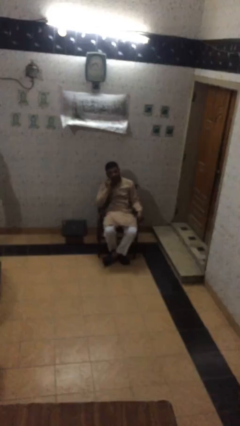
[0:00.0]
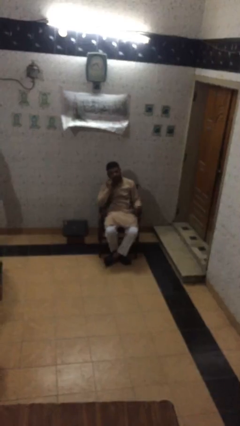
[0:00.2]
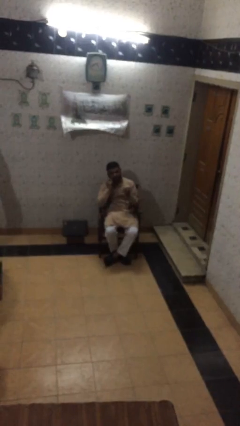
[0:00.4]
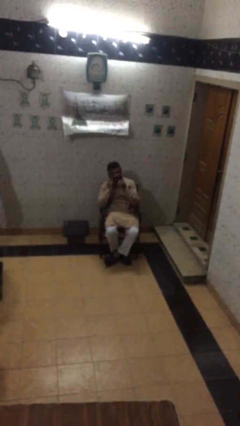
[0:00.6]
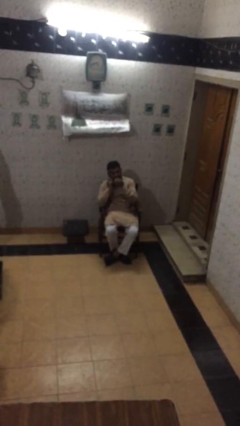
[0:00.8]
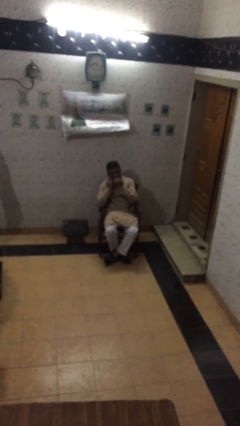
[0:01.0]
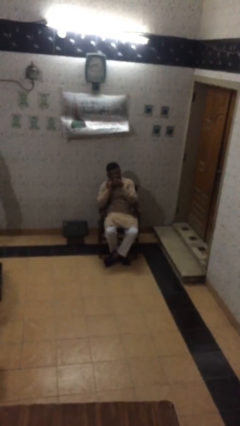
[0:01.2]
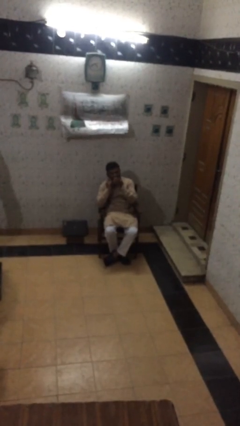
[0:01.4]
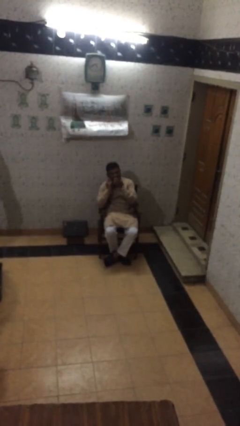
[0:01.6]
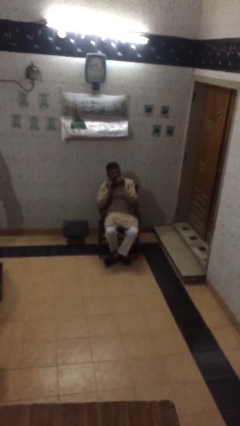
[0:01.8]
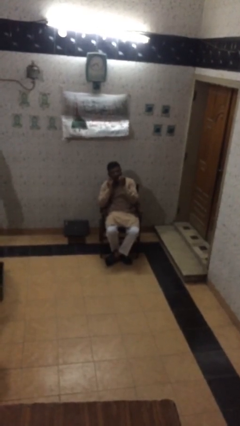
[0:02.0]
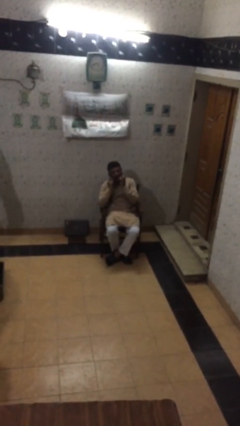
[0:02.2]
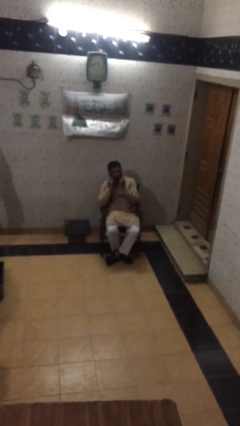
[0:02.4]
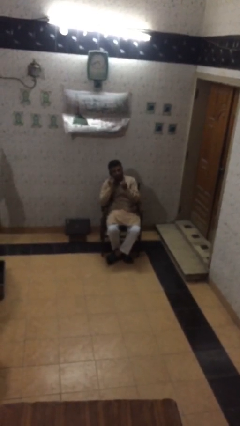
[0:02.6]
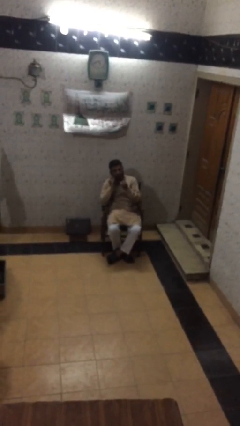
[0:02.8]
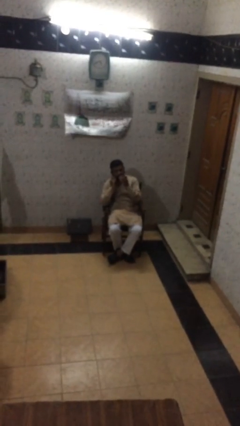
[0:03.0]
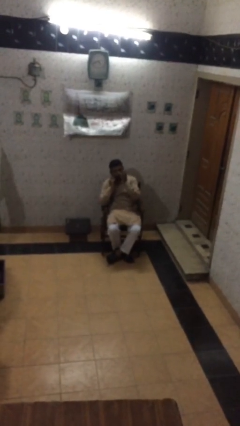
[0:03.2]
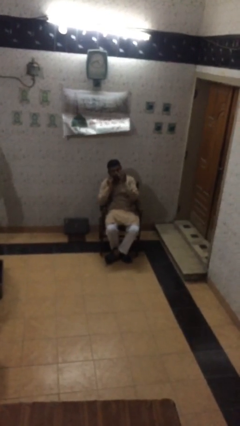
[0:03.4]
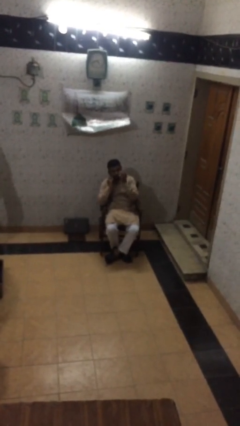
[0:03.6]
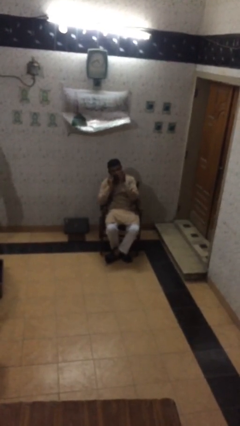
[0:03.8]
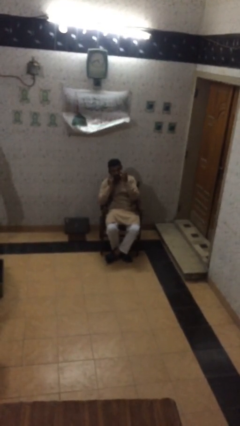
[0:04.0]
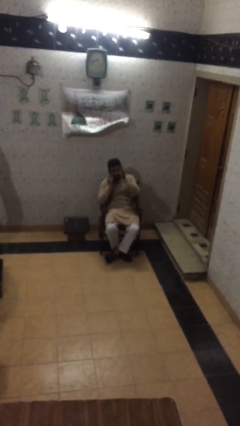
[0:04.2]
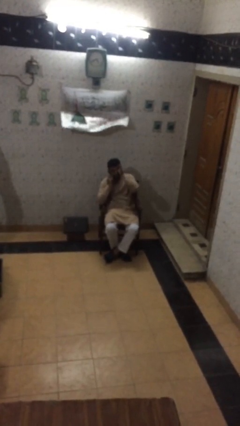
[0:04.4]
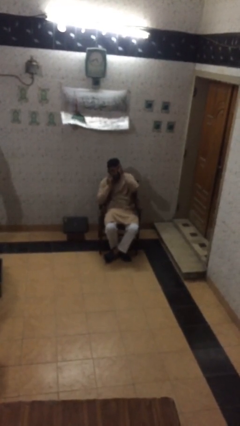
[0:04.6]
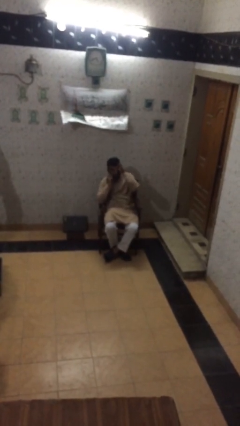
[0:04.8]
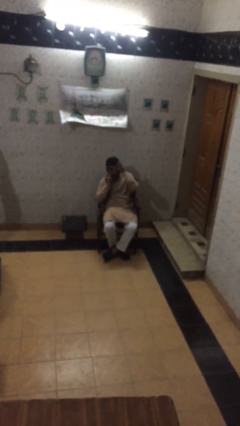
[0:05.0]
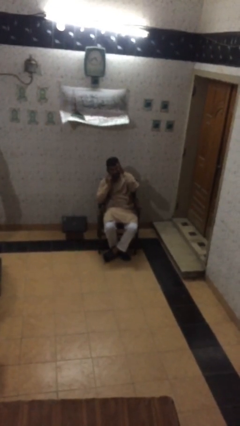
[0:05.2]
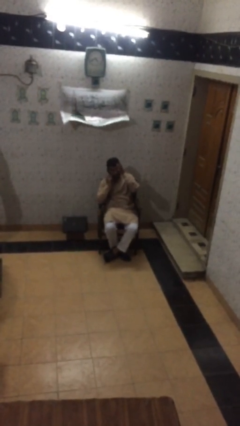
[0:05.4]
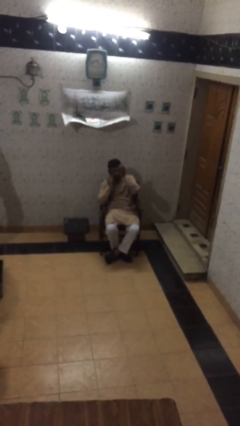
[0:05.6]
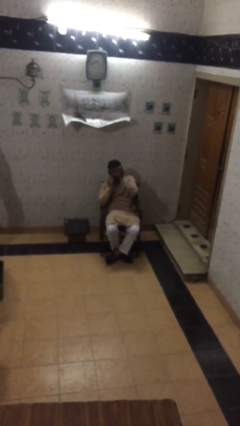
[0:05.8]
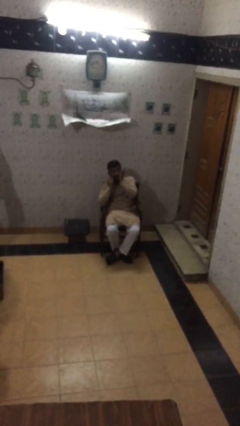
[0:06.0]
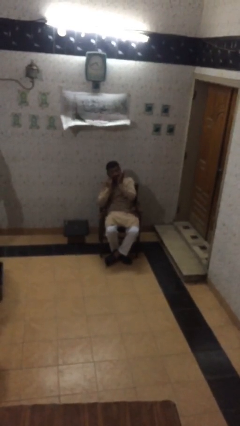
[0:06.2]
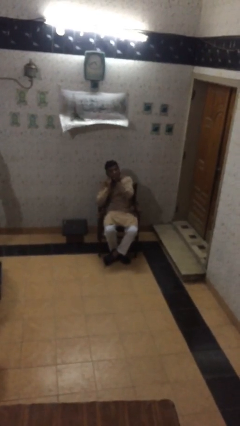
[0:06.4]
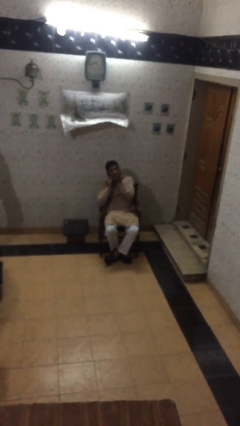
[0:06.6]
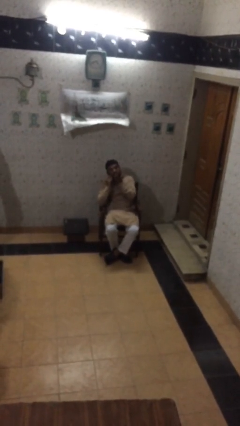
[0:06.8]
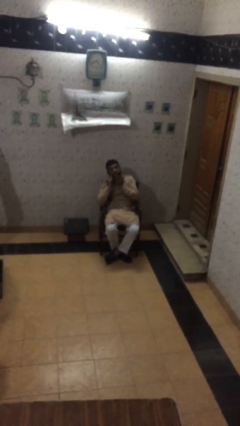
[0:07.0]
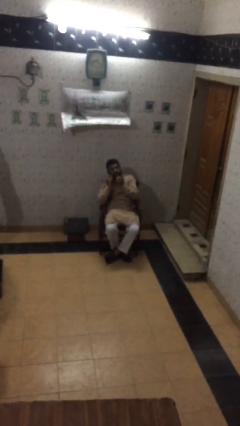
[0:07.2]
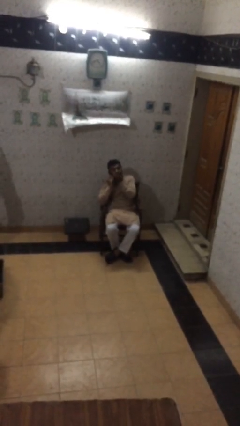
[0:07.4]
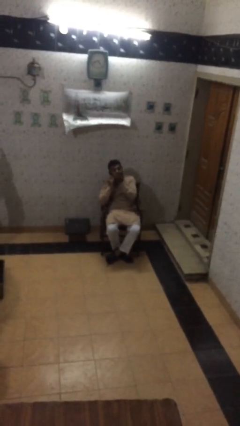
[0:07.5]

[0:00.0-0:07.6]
person talks on phone

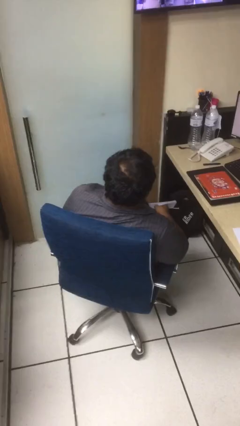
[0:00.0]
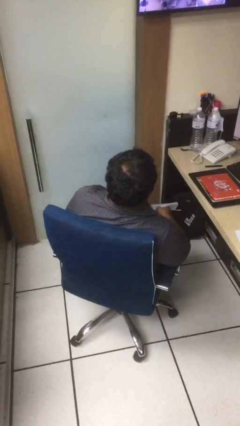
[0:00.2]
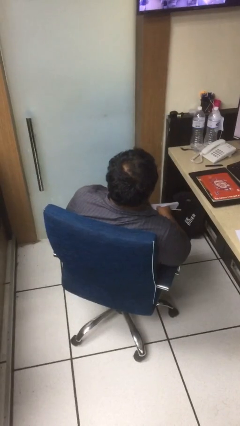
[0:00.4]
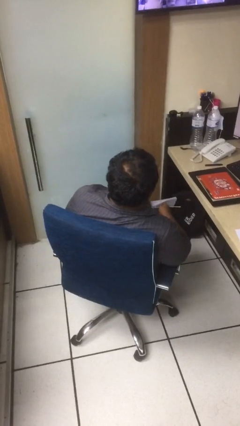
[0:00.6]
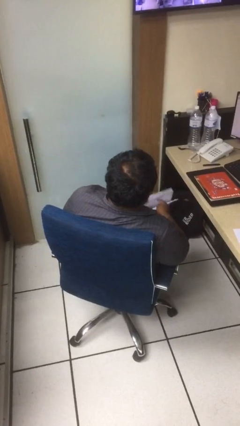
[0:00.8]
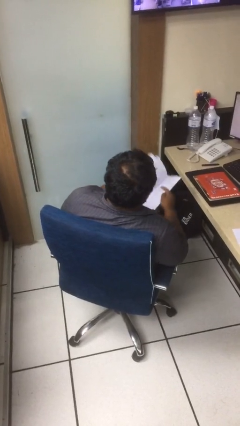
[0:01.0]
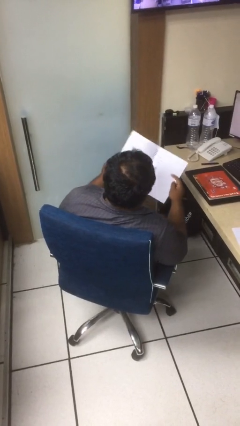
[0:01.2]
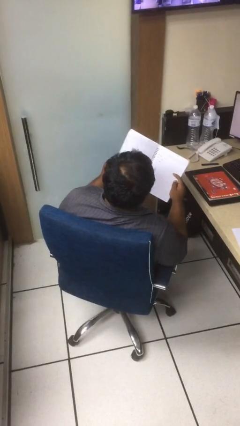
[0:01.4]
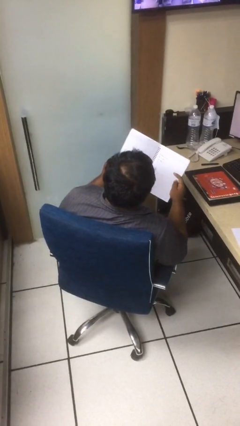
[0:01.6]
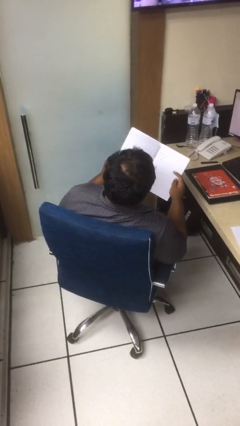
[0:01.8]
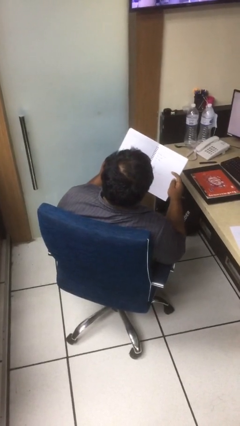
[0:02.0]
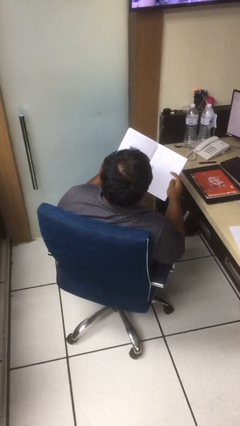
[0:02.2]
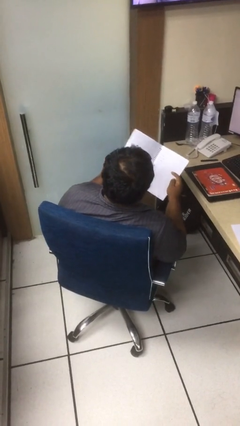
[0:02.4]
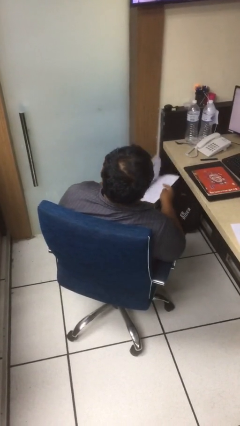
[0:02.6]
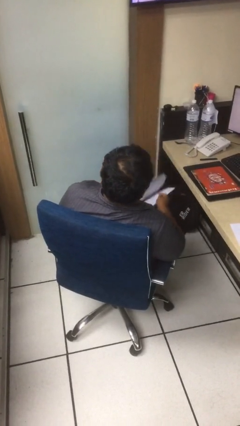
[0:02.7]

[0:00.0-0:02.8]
person reads book

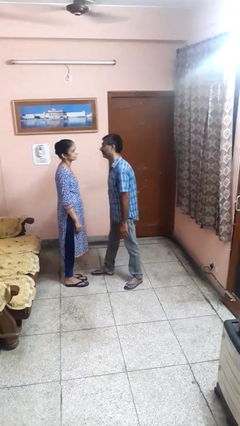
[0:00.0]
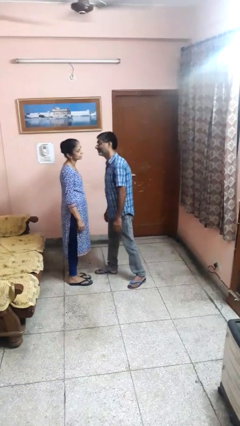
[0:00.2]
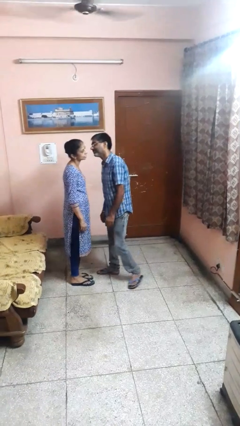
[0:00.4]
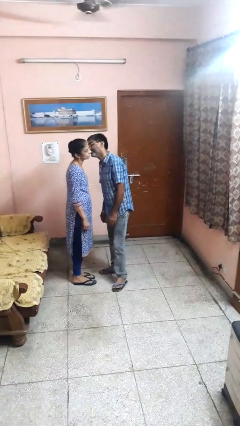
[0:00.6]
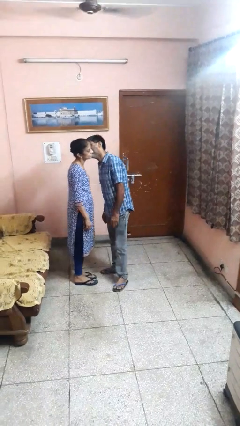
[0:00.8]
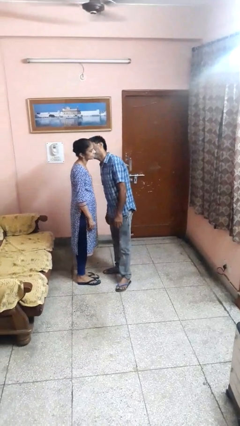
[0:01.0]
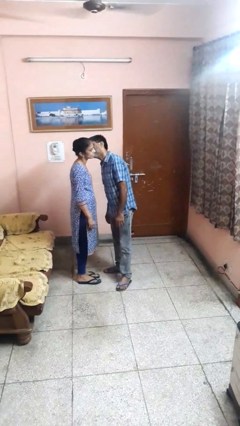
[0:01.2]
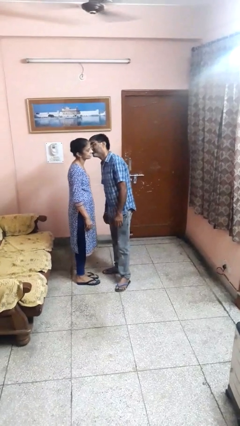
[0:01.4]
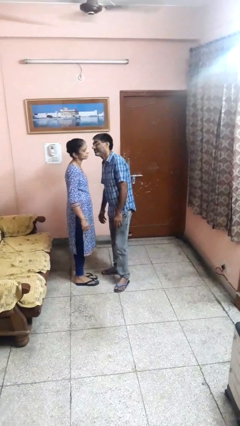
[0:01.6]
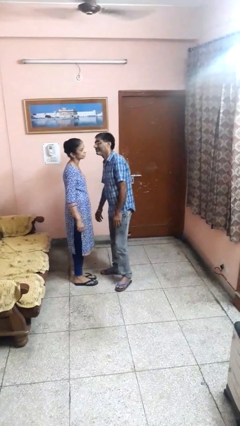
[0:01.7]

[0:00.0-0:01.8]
person kisses cheek of person

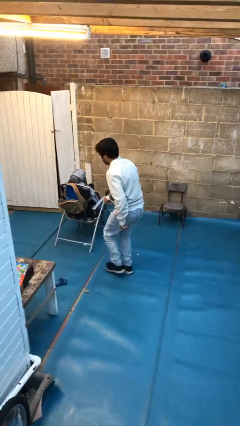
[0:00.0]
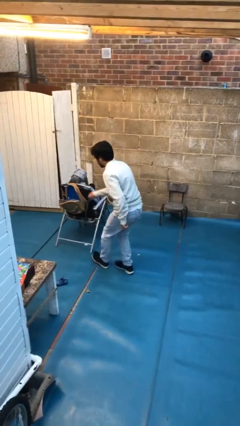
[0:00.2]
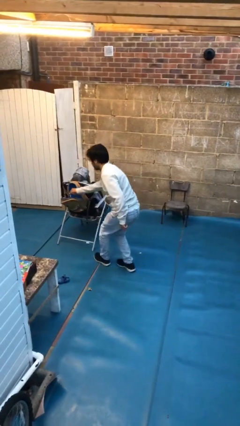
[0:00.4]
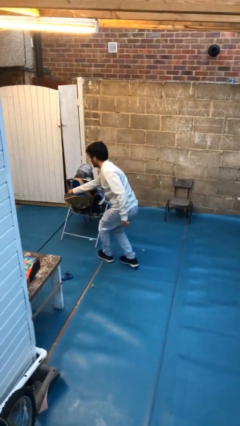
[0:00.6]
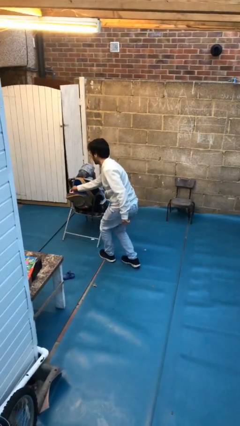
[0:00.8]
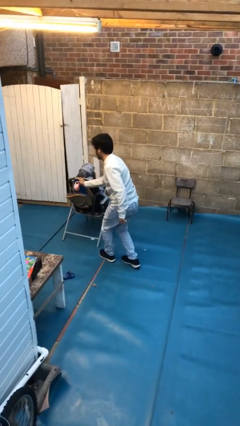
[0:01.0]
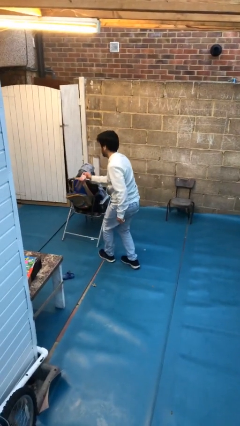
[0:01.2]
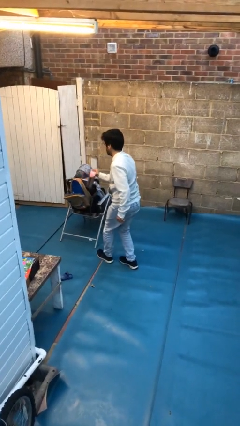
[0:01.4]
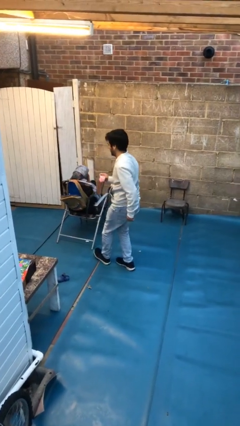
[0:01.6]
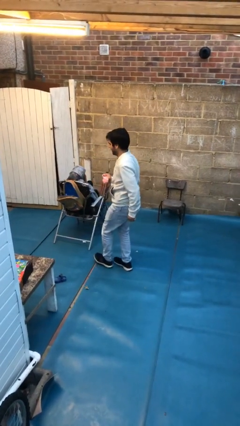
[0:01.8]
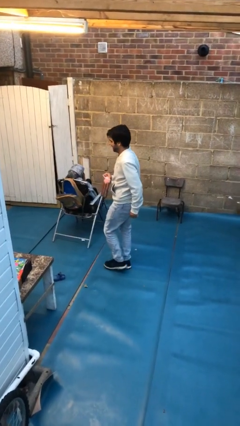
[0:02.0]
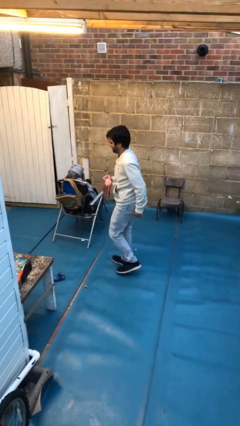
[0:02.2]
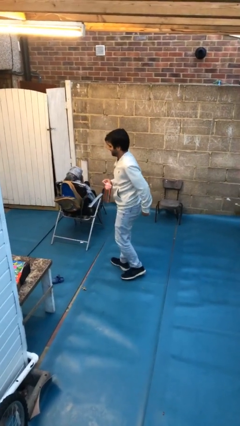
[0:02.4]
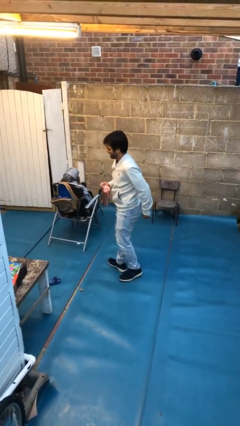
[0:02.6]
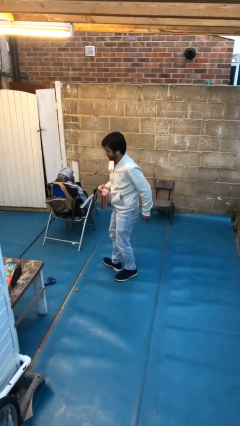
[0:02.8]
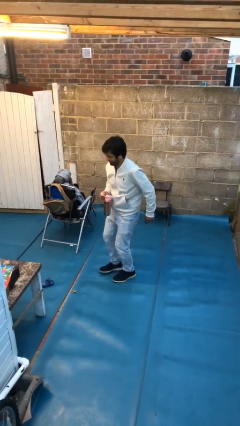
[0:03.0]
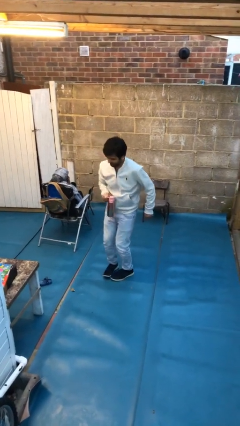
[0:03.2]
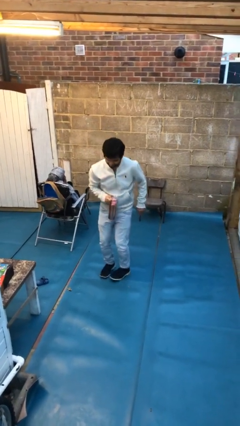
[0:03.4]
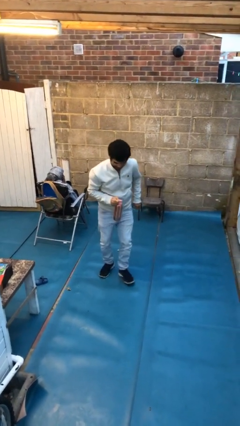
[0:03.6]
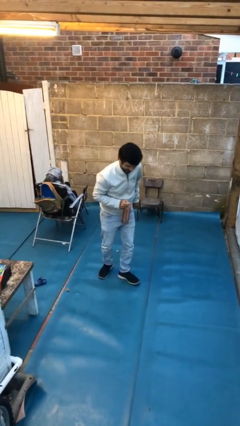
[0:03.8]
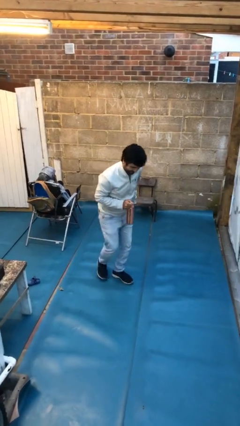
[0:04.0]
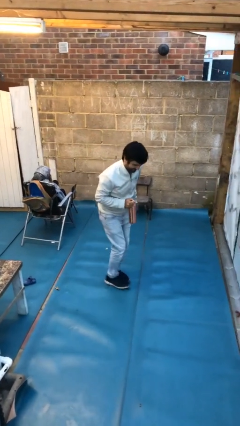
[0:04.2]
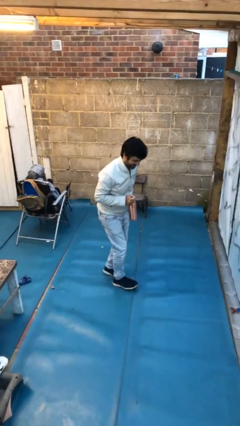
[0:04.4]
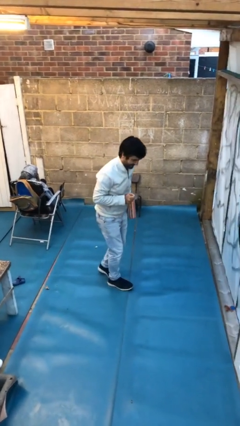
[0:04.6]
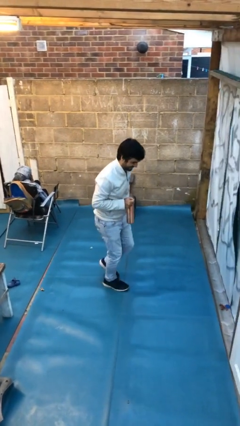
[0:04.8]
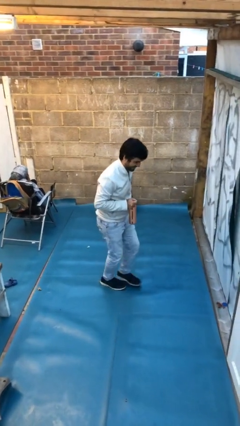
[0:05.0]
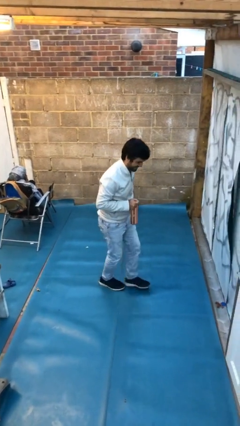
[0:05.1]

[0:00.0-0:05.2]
person steals object from person
